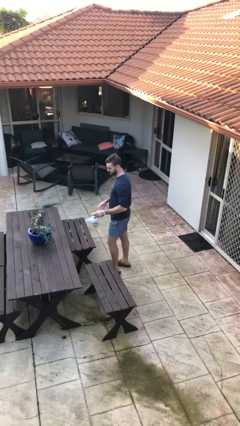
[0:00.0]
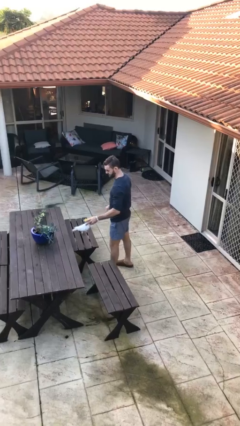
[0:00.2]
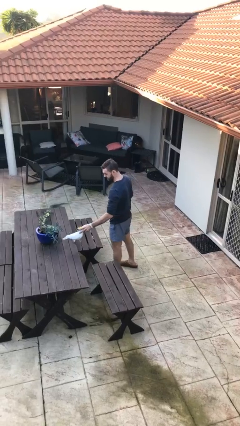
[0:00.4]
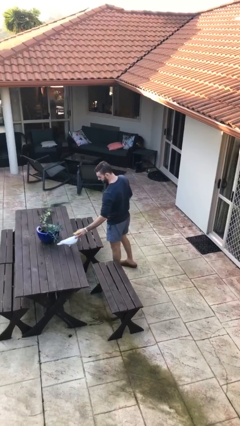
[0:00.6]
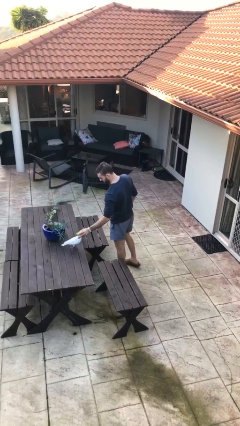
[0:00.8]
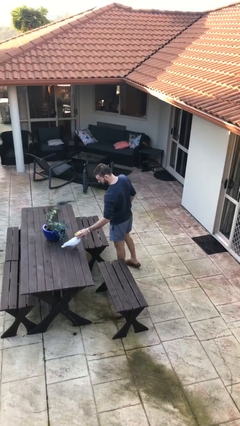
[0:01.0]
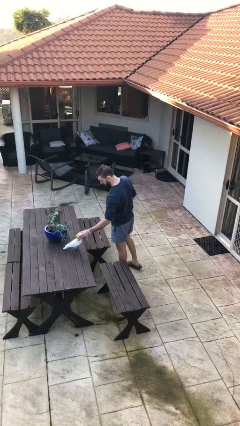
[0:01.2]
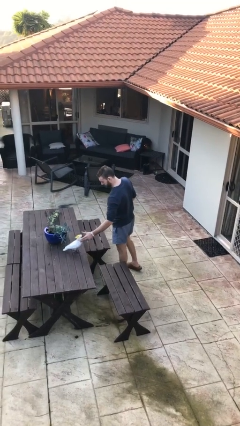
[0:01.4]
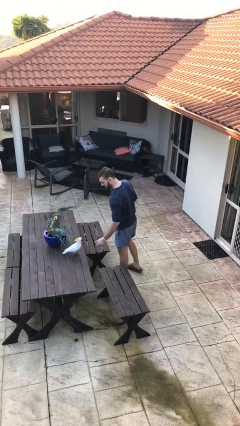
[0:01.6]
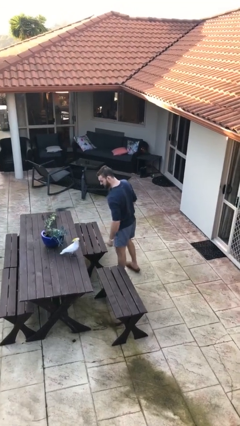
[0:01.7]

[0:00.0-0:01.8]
person puts down object on table

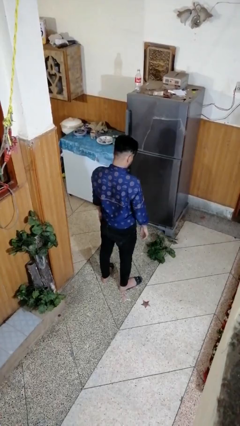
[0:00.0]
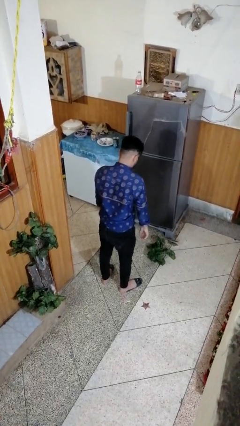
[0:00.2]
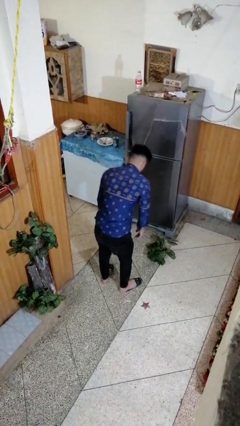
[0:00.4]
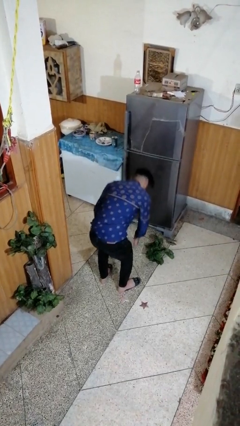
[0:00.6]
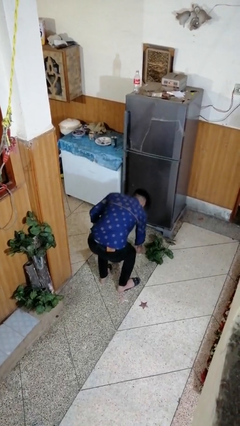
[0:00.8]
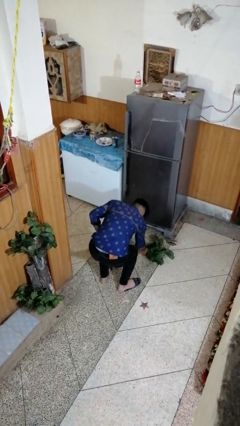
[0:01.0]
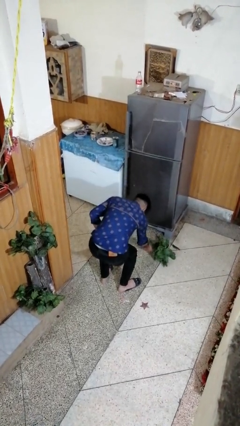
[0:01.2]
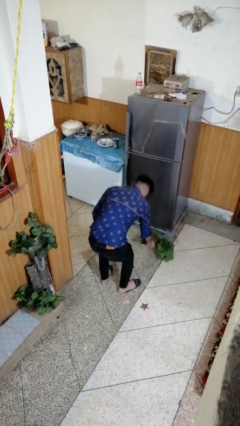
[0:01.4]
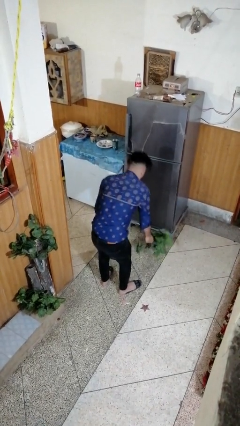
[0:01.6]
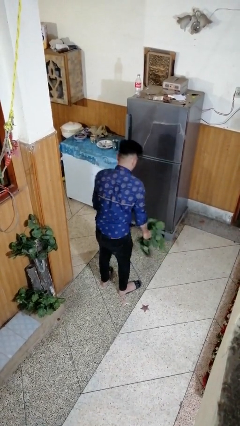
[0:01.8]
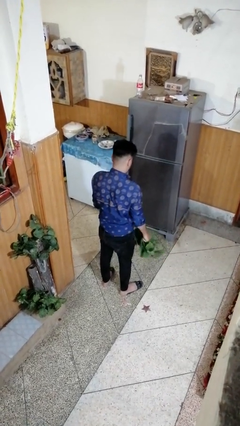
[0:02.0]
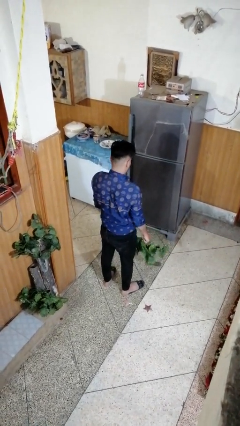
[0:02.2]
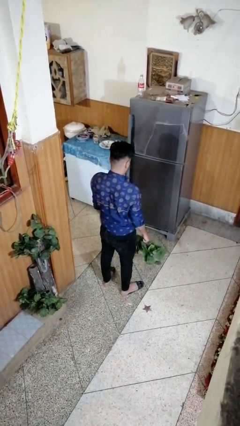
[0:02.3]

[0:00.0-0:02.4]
person picks up object from floor

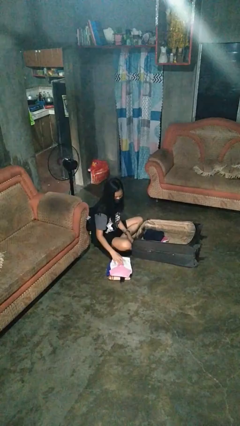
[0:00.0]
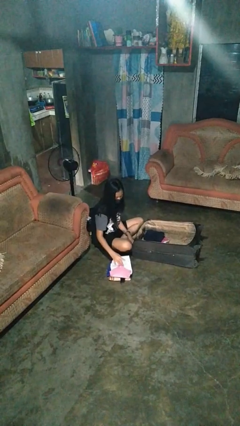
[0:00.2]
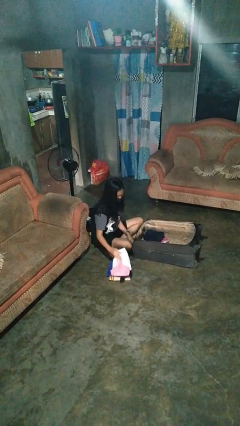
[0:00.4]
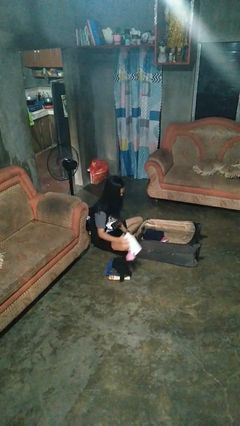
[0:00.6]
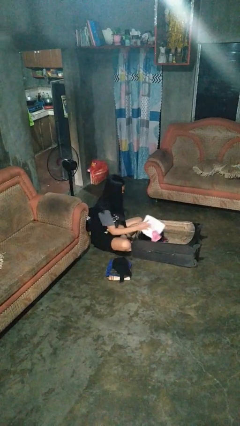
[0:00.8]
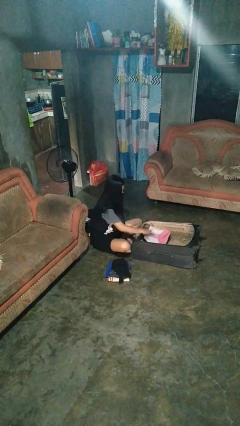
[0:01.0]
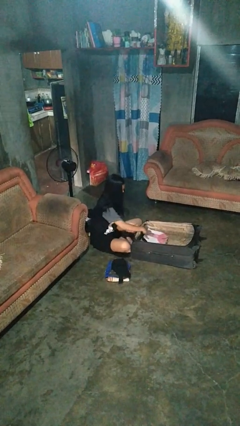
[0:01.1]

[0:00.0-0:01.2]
person loads clothes into suitcase

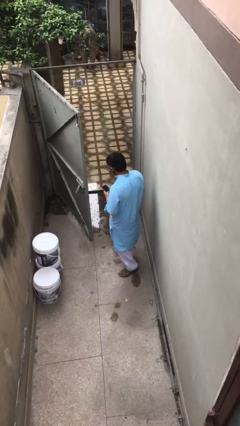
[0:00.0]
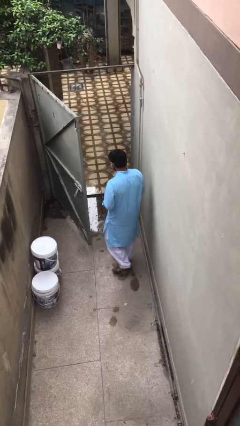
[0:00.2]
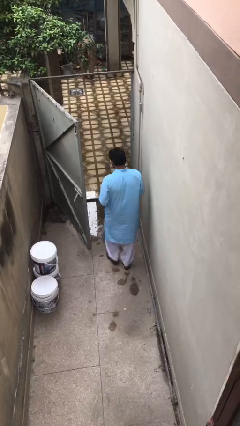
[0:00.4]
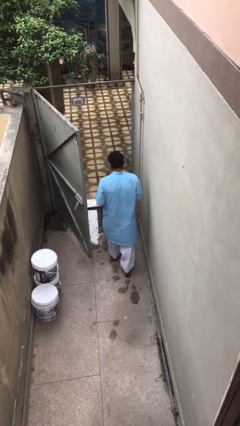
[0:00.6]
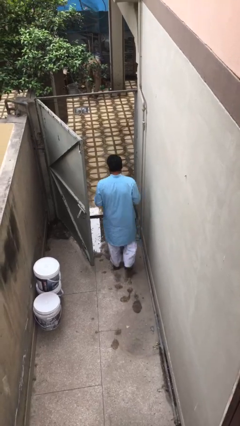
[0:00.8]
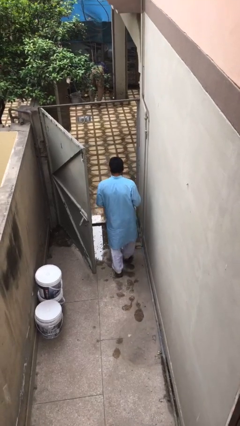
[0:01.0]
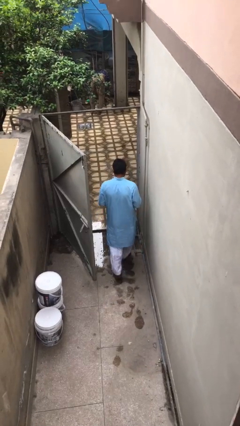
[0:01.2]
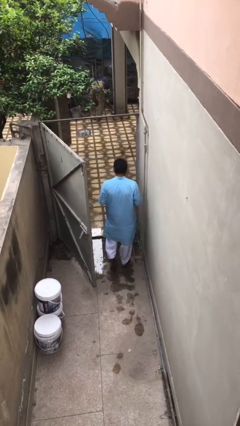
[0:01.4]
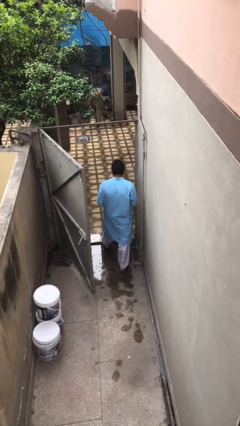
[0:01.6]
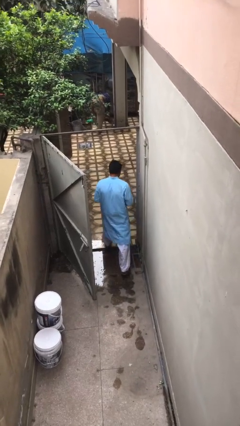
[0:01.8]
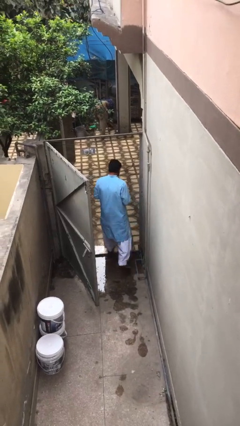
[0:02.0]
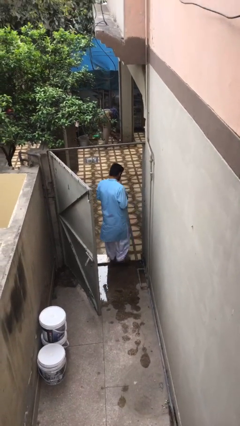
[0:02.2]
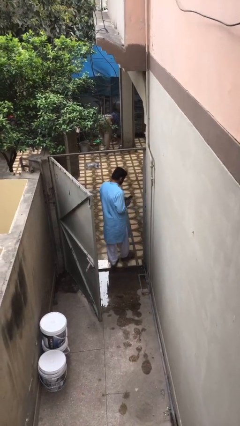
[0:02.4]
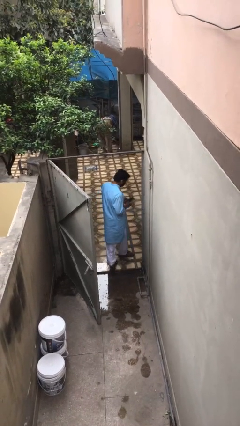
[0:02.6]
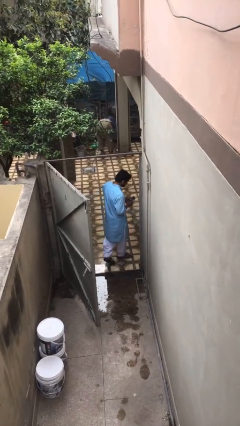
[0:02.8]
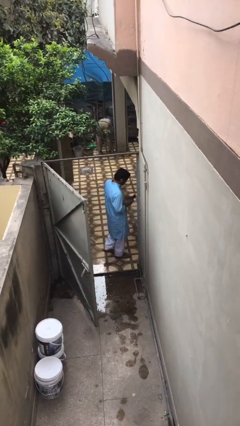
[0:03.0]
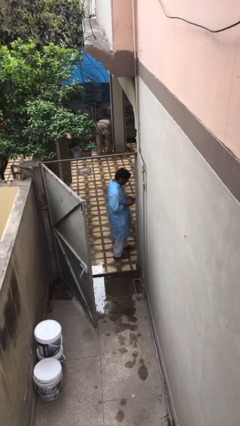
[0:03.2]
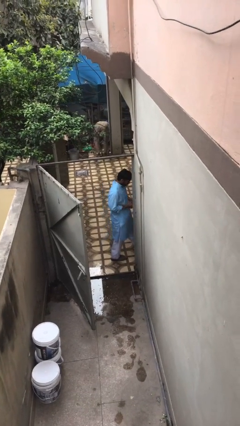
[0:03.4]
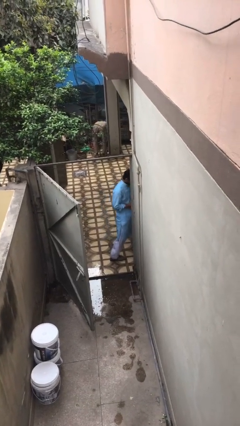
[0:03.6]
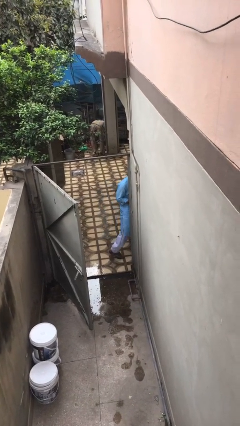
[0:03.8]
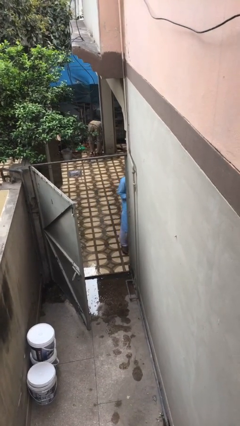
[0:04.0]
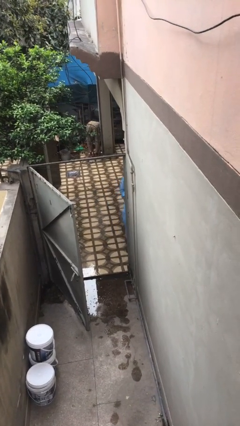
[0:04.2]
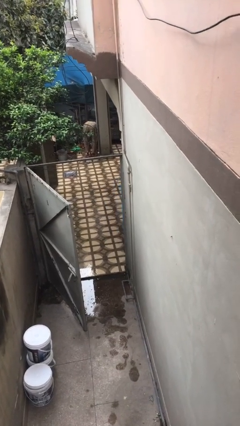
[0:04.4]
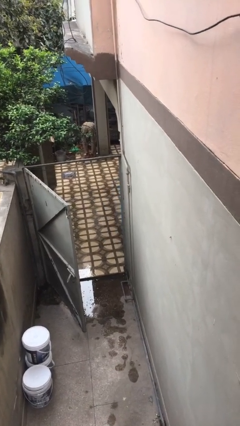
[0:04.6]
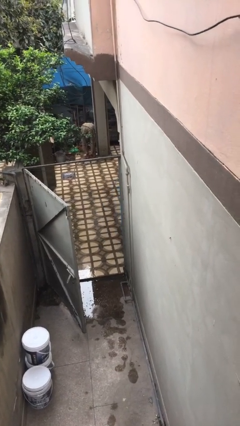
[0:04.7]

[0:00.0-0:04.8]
person exits scene through structure

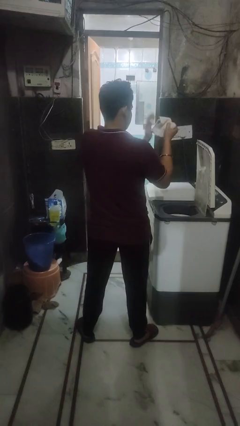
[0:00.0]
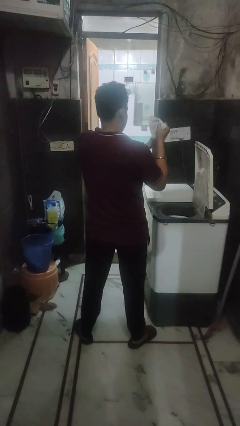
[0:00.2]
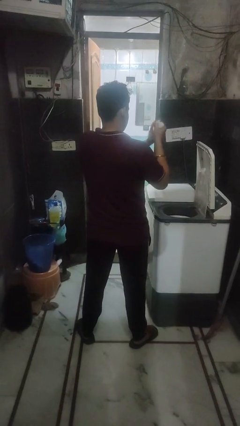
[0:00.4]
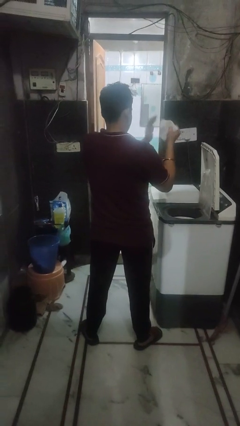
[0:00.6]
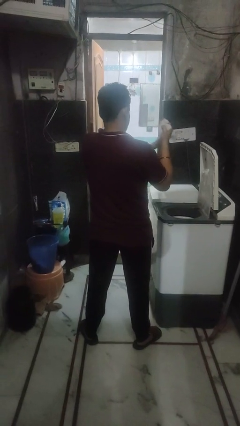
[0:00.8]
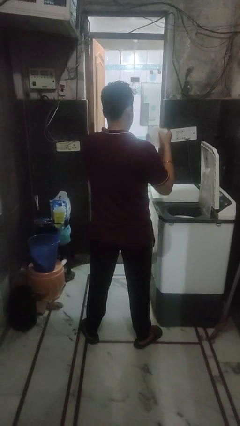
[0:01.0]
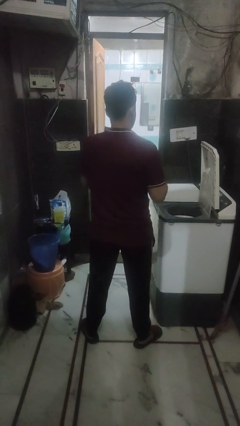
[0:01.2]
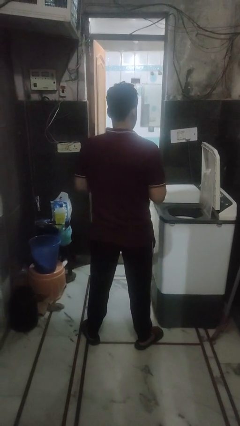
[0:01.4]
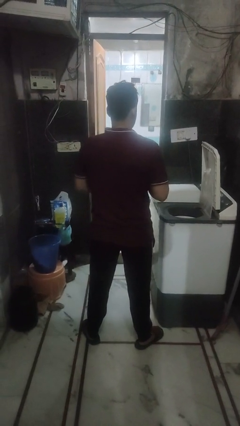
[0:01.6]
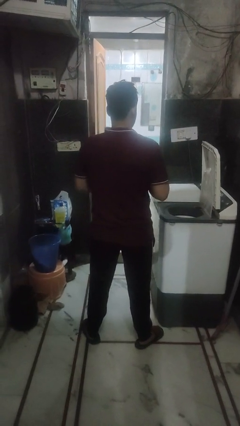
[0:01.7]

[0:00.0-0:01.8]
person cleans dryer lint trap

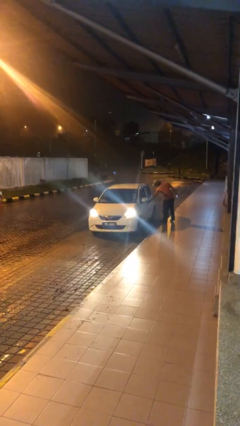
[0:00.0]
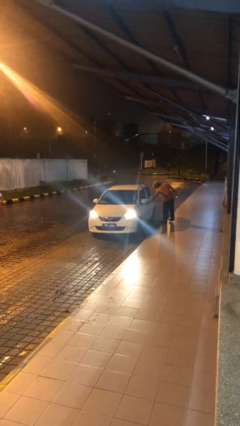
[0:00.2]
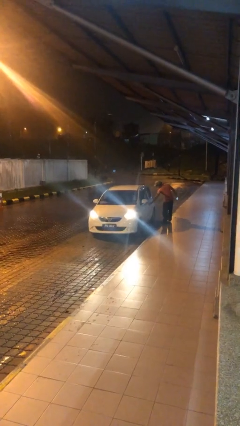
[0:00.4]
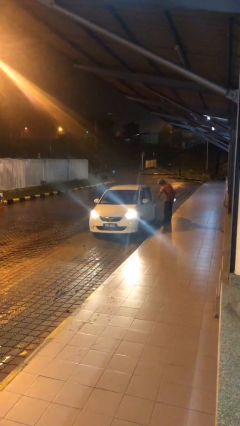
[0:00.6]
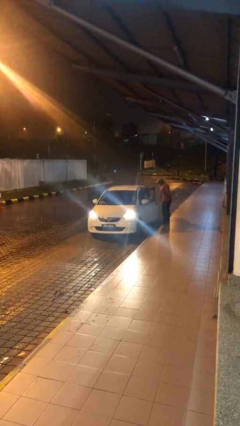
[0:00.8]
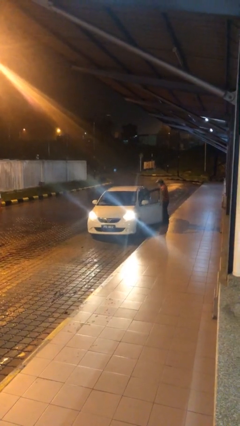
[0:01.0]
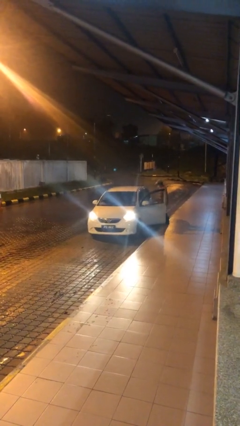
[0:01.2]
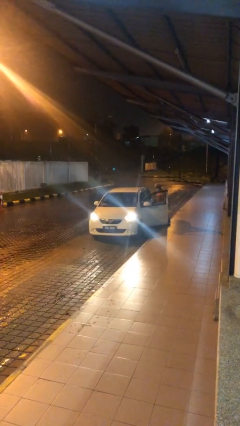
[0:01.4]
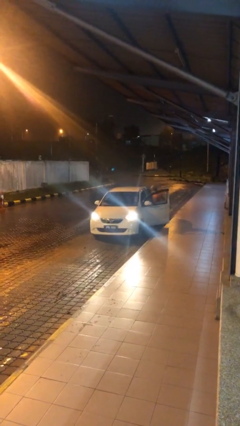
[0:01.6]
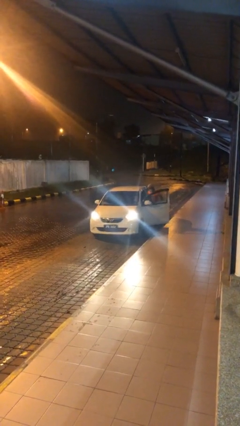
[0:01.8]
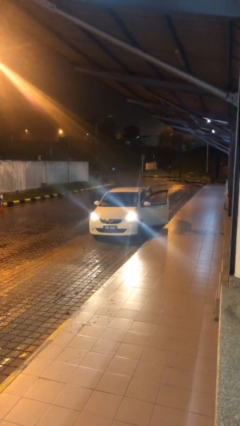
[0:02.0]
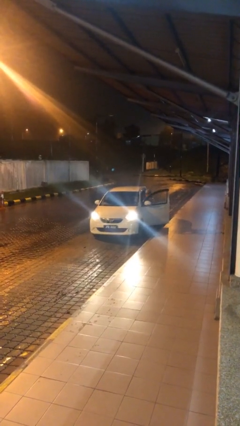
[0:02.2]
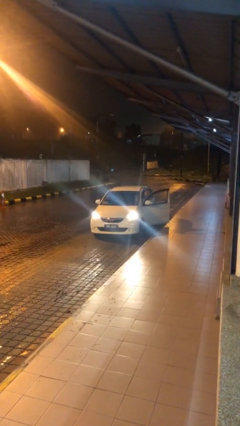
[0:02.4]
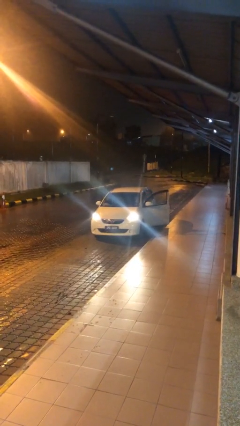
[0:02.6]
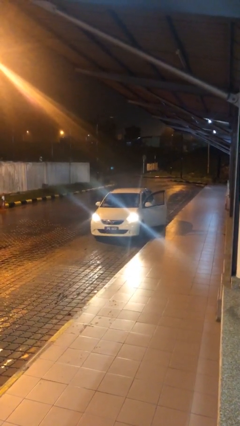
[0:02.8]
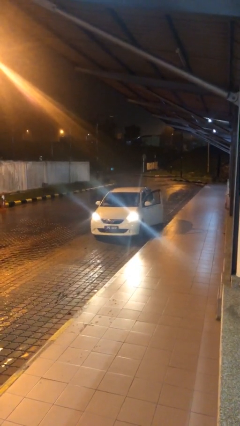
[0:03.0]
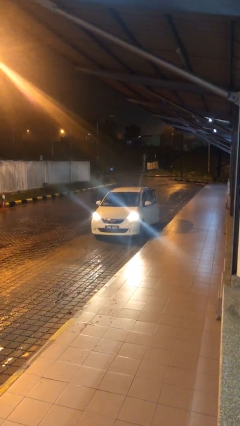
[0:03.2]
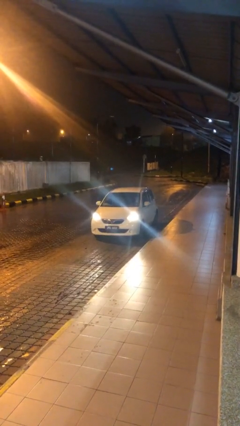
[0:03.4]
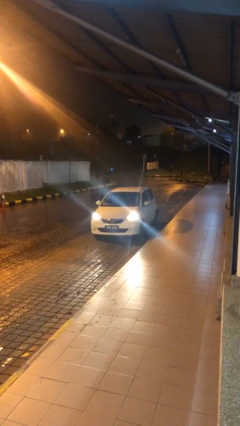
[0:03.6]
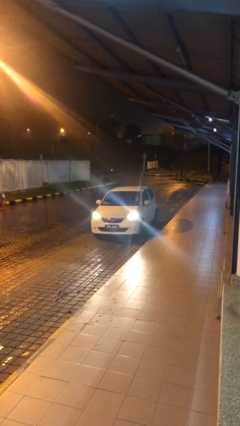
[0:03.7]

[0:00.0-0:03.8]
car picks up person

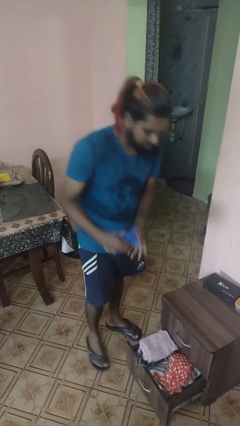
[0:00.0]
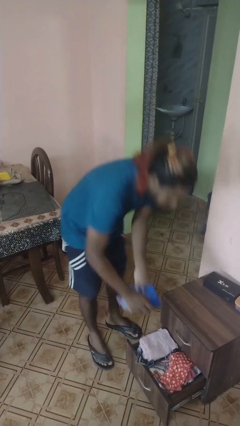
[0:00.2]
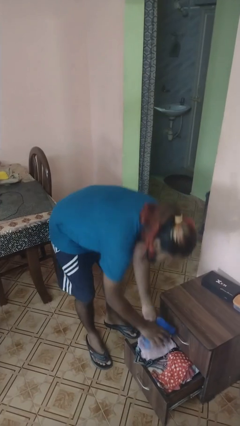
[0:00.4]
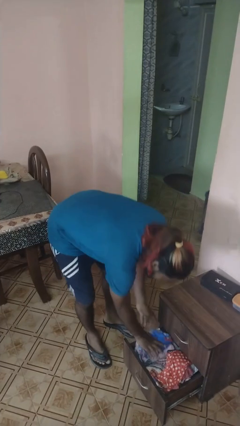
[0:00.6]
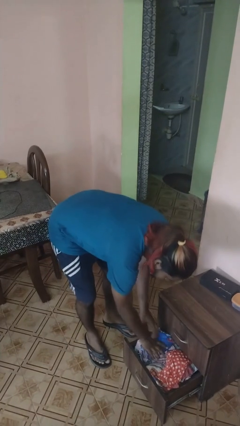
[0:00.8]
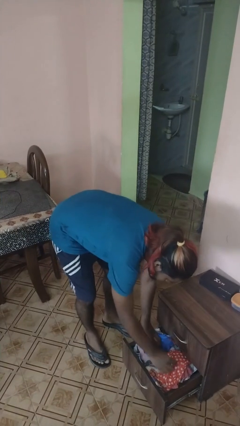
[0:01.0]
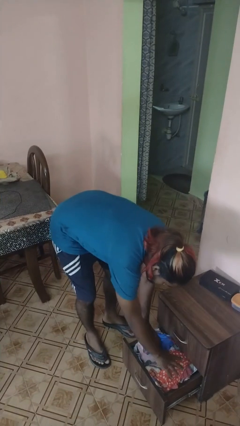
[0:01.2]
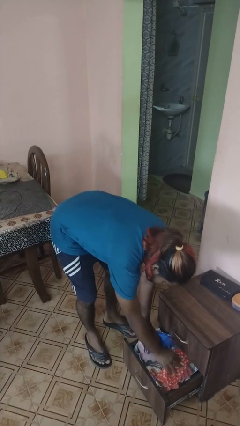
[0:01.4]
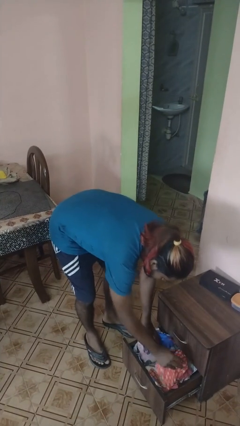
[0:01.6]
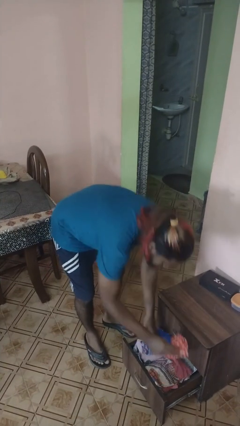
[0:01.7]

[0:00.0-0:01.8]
person puts clothes into dresser
